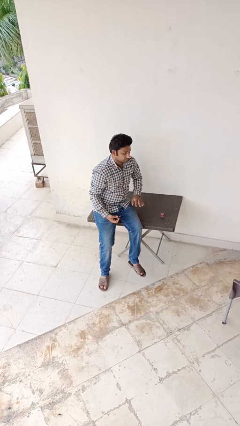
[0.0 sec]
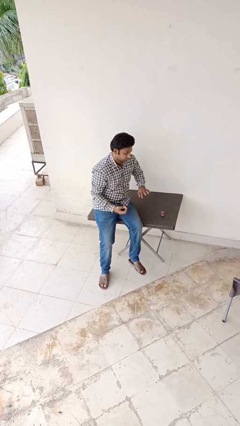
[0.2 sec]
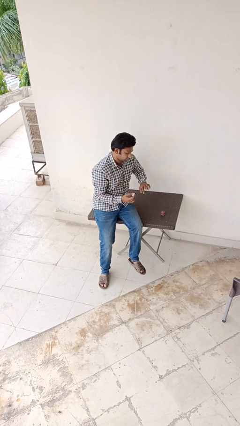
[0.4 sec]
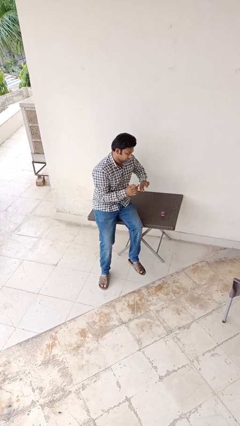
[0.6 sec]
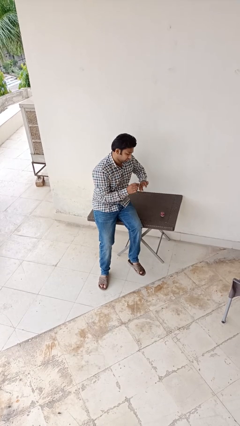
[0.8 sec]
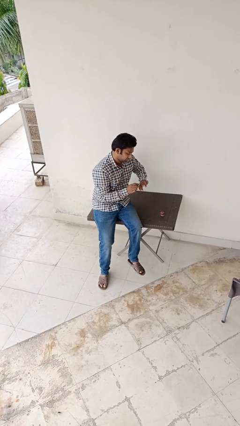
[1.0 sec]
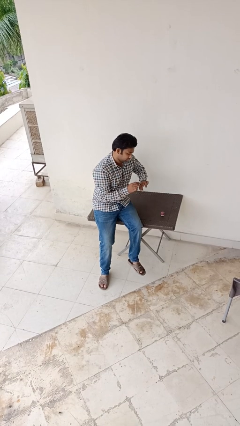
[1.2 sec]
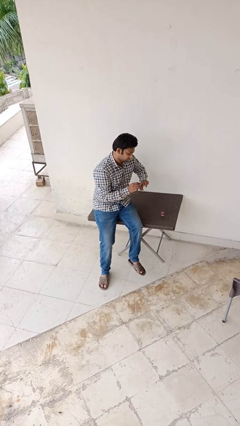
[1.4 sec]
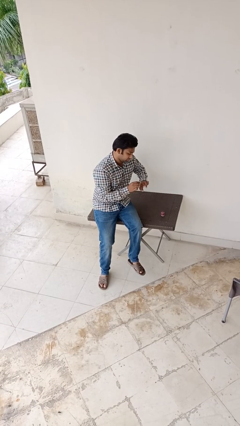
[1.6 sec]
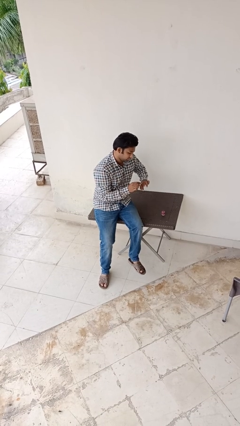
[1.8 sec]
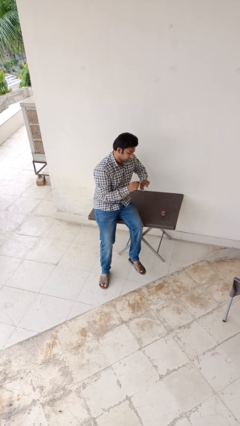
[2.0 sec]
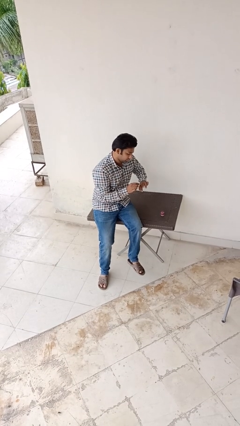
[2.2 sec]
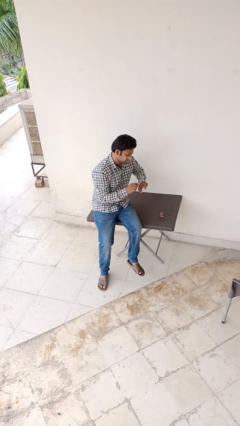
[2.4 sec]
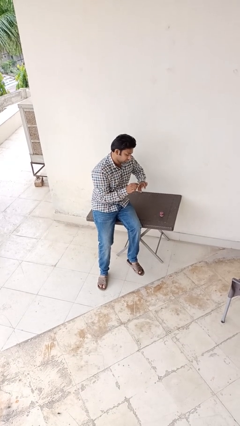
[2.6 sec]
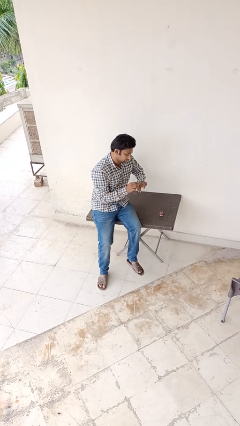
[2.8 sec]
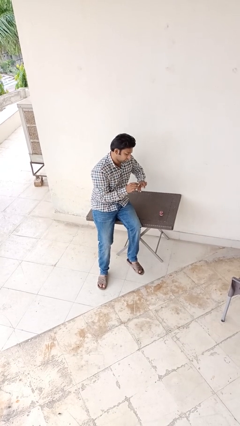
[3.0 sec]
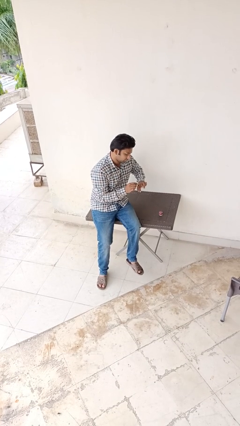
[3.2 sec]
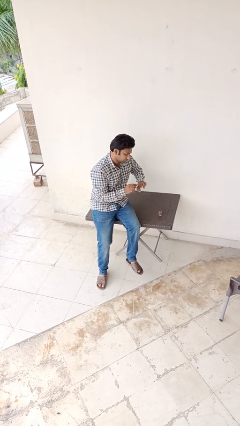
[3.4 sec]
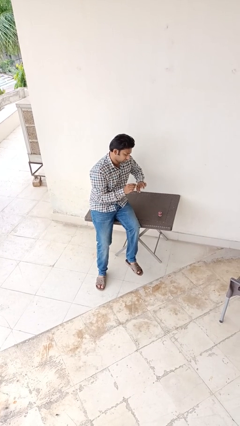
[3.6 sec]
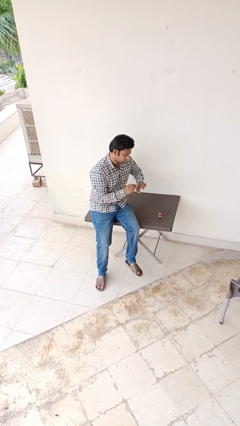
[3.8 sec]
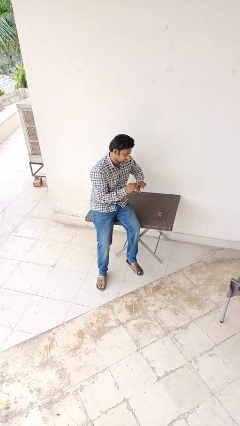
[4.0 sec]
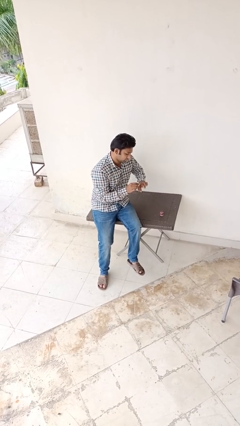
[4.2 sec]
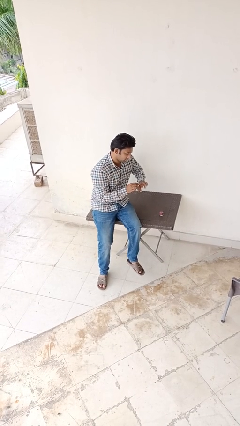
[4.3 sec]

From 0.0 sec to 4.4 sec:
person paints fingernails

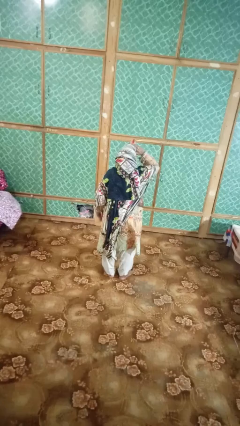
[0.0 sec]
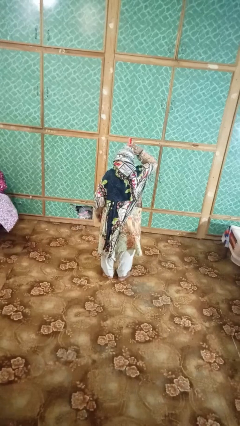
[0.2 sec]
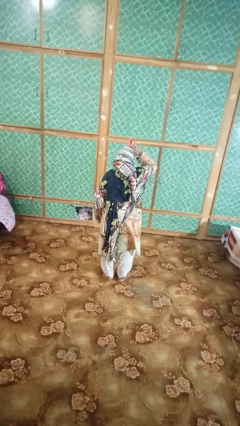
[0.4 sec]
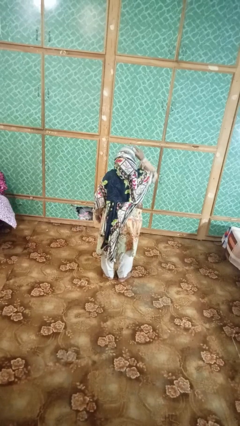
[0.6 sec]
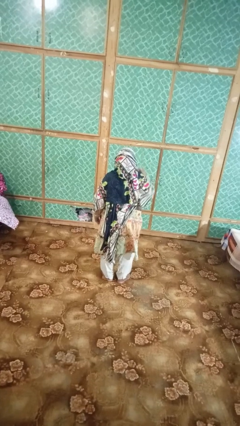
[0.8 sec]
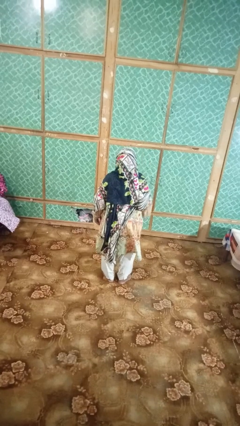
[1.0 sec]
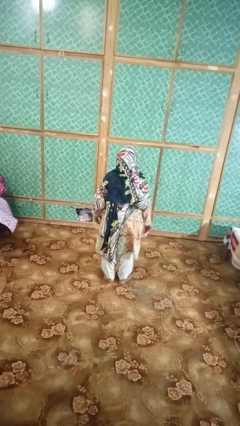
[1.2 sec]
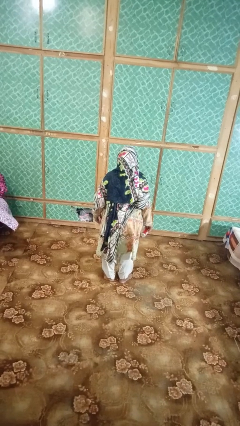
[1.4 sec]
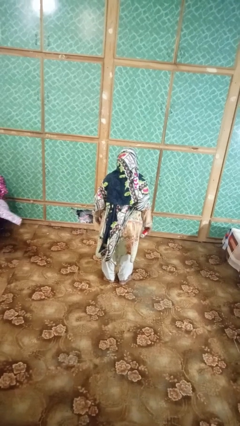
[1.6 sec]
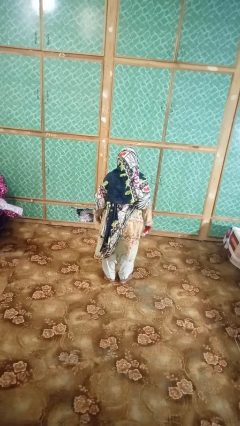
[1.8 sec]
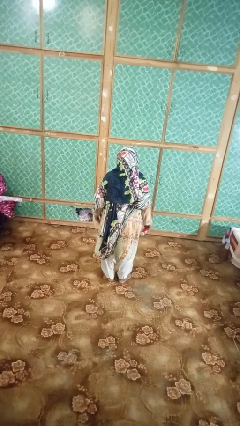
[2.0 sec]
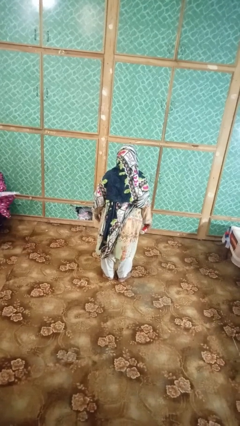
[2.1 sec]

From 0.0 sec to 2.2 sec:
person drinks from beverage can

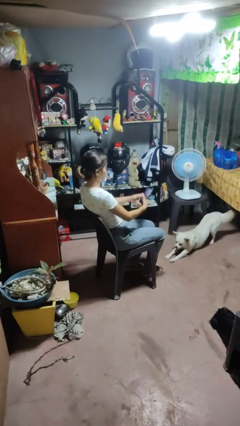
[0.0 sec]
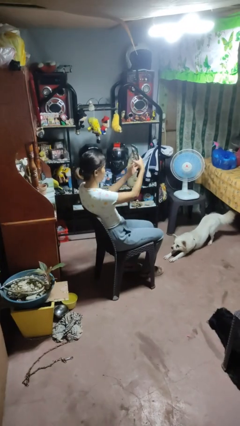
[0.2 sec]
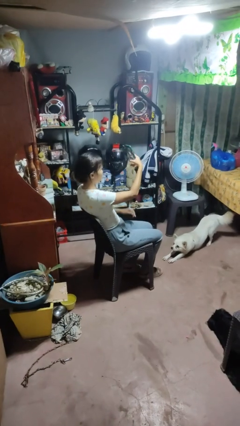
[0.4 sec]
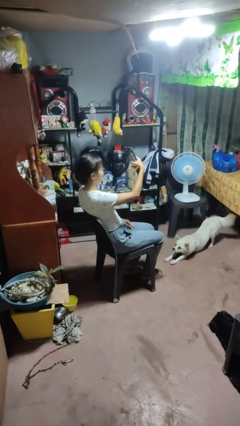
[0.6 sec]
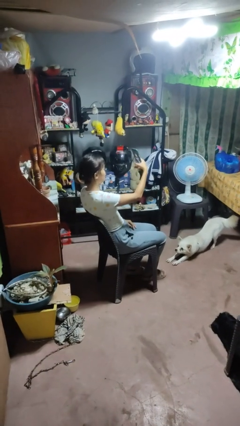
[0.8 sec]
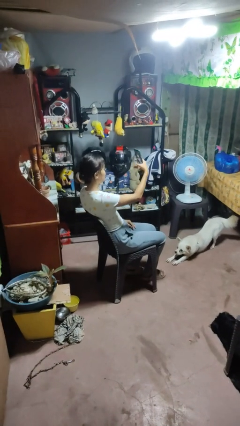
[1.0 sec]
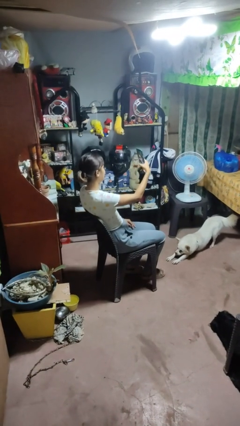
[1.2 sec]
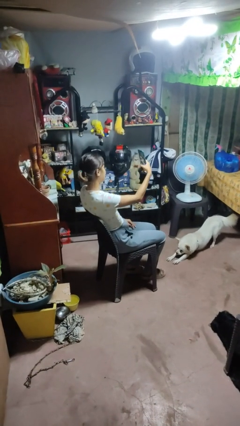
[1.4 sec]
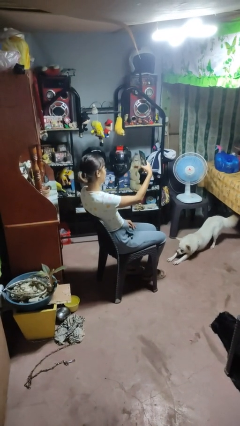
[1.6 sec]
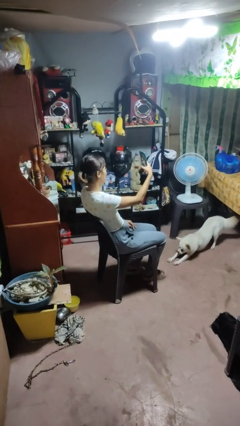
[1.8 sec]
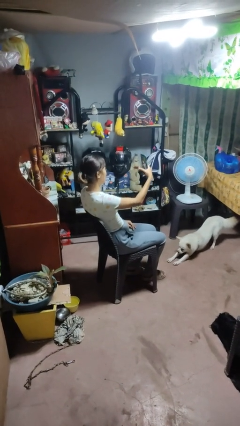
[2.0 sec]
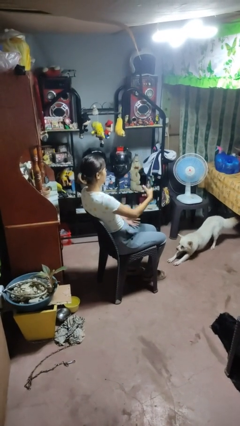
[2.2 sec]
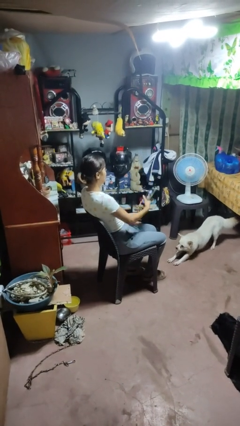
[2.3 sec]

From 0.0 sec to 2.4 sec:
person takes selfie

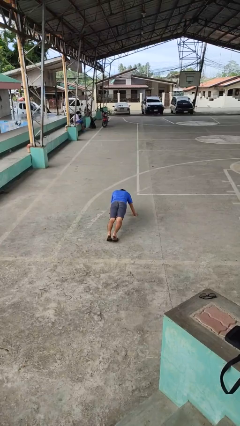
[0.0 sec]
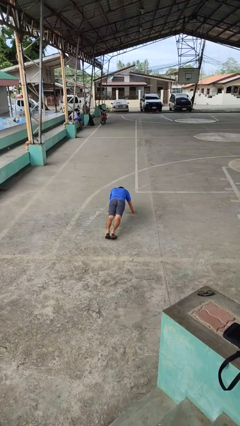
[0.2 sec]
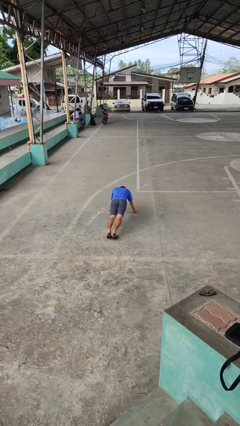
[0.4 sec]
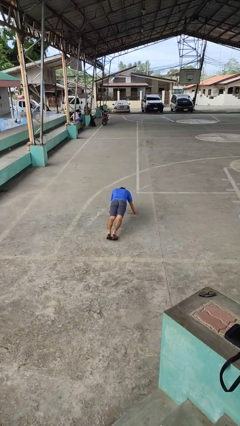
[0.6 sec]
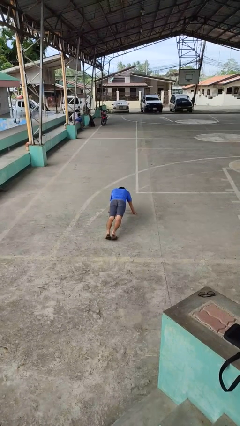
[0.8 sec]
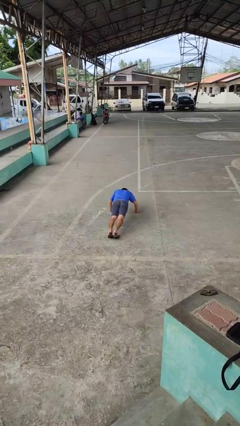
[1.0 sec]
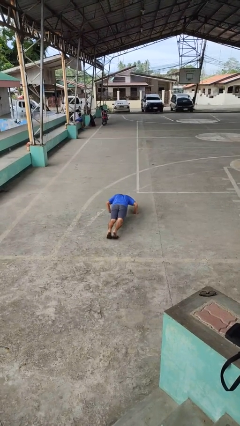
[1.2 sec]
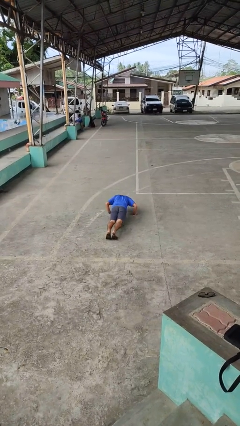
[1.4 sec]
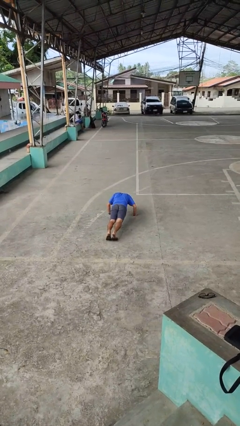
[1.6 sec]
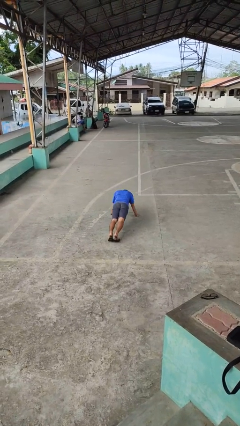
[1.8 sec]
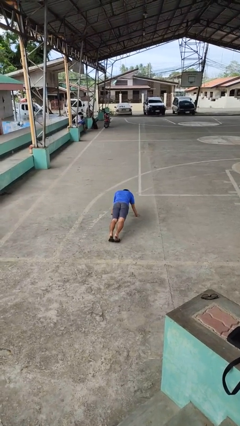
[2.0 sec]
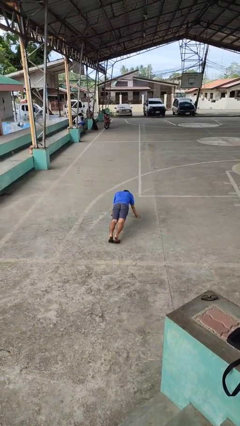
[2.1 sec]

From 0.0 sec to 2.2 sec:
person exercises with pushup

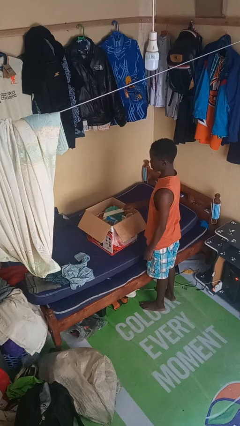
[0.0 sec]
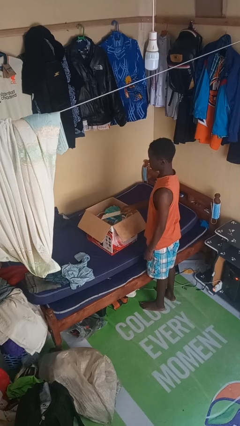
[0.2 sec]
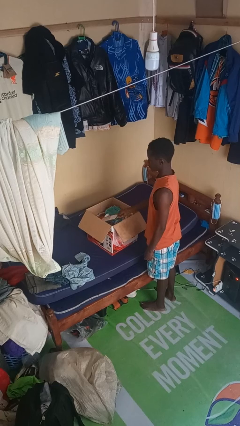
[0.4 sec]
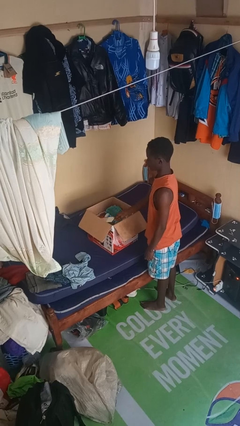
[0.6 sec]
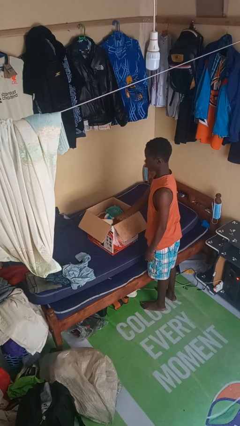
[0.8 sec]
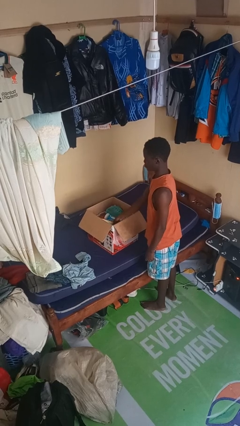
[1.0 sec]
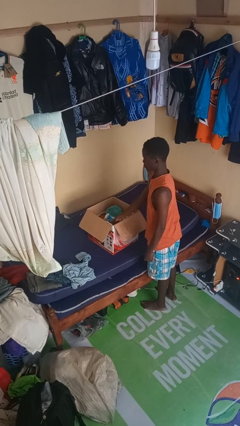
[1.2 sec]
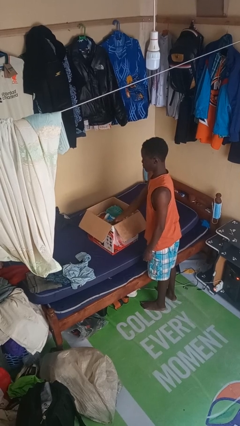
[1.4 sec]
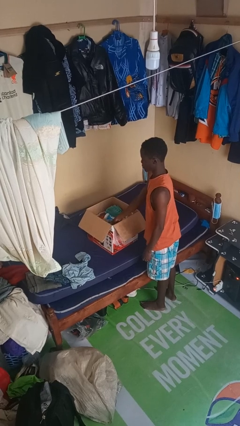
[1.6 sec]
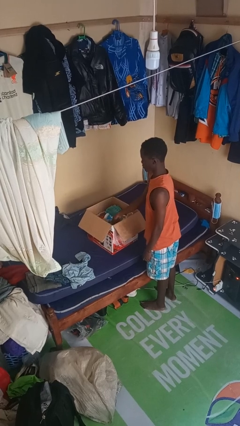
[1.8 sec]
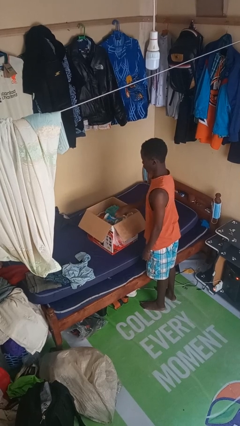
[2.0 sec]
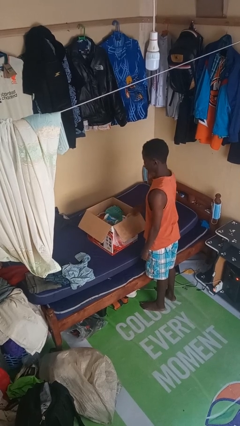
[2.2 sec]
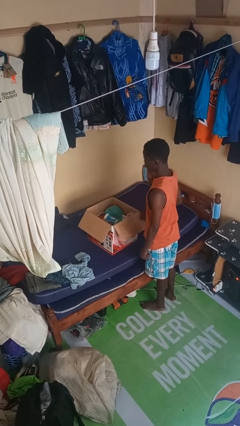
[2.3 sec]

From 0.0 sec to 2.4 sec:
person puts object into box

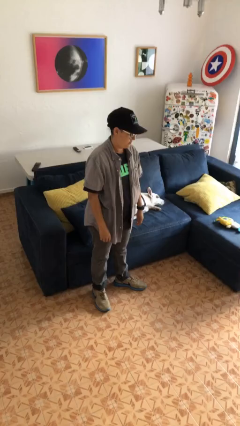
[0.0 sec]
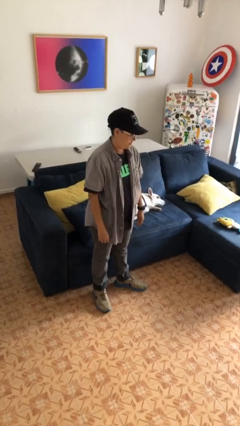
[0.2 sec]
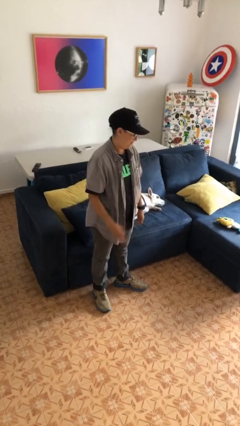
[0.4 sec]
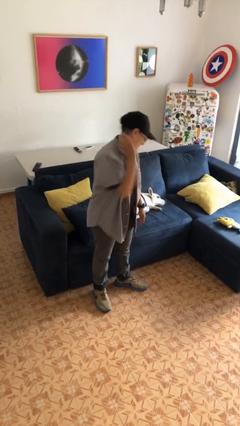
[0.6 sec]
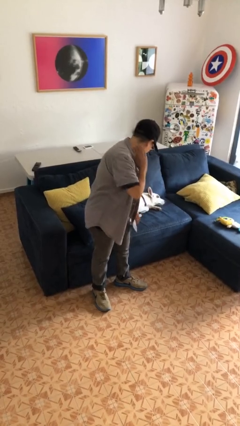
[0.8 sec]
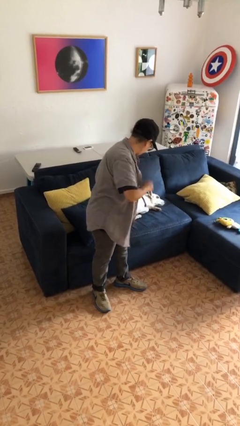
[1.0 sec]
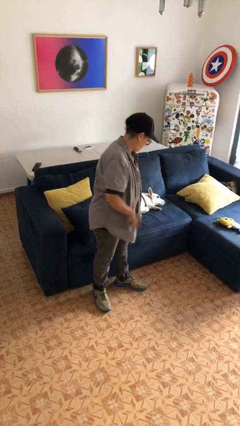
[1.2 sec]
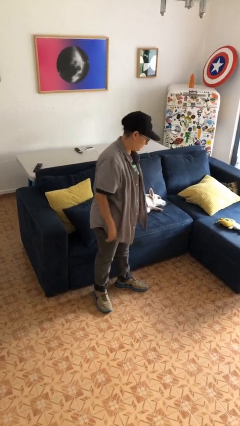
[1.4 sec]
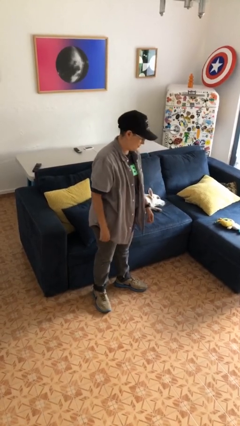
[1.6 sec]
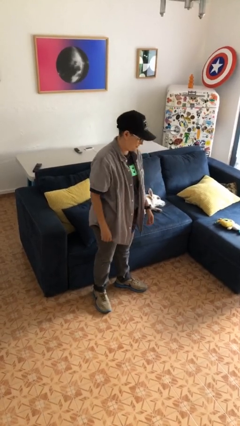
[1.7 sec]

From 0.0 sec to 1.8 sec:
person swats bug

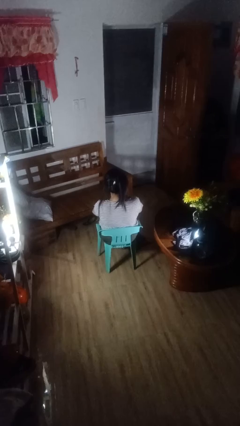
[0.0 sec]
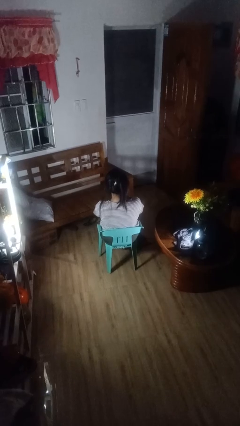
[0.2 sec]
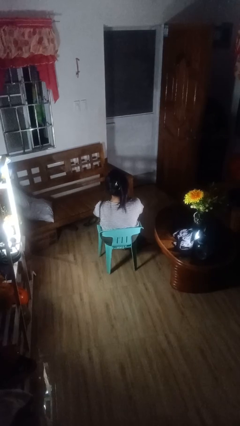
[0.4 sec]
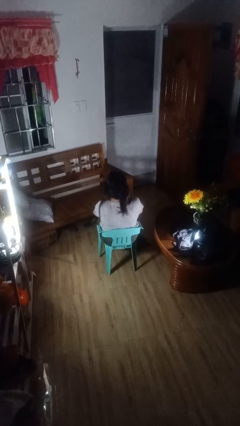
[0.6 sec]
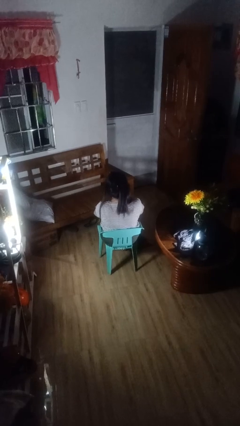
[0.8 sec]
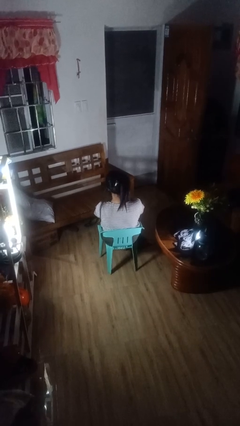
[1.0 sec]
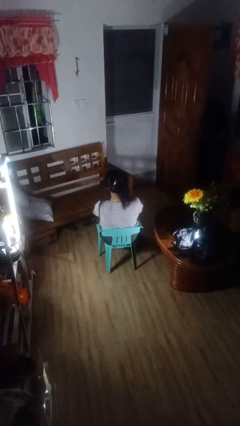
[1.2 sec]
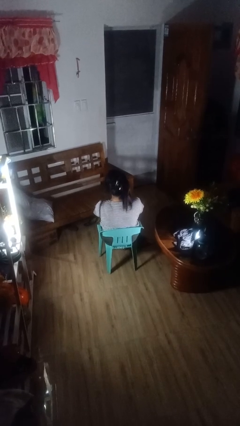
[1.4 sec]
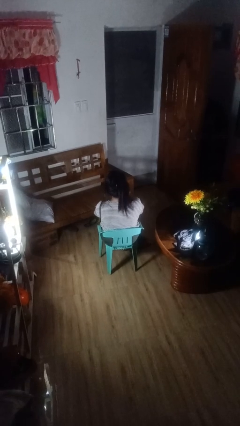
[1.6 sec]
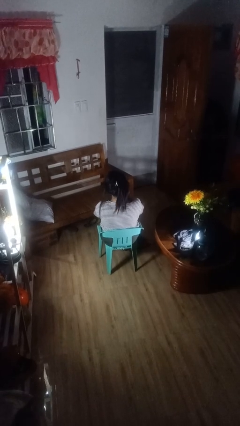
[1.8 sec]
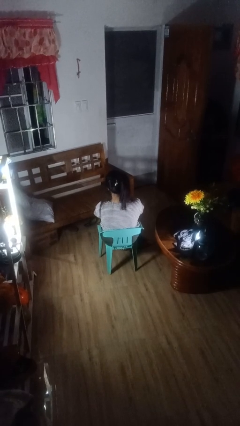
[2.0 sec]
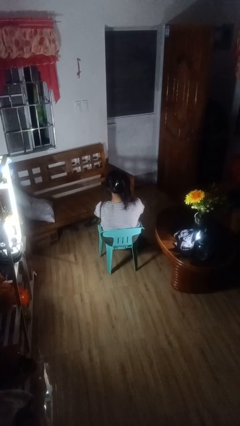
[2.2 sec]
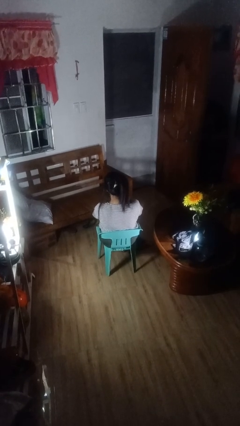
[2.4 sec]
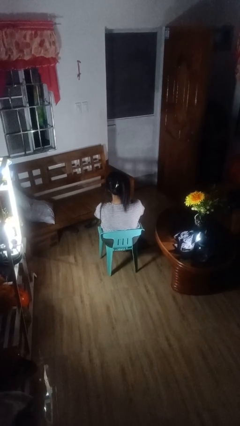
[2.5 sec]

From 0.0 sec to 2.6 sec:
person nods head
